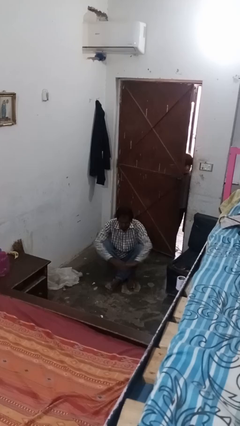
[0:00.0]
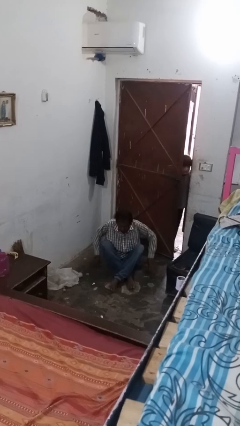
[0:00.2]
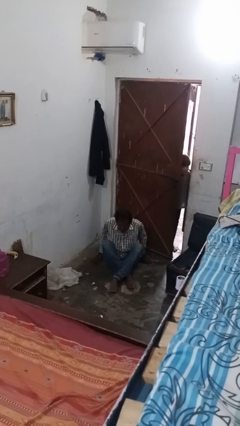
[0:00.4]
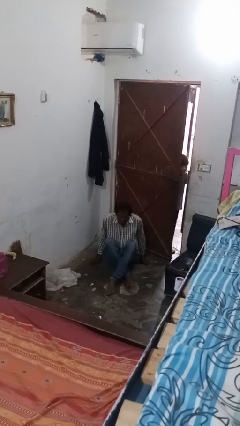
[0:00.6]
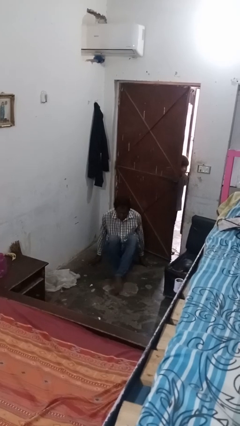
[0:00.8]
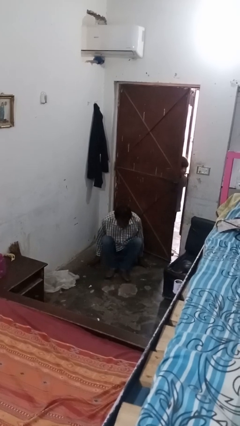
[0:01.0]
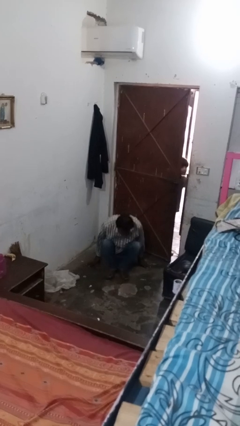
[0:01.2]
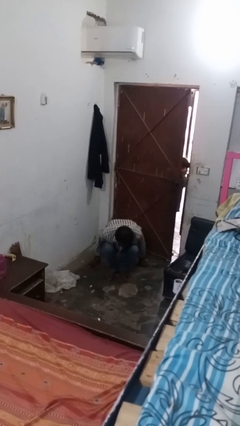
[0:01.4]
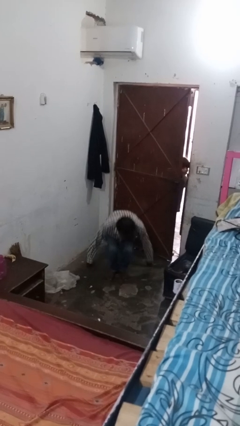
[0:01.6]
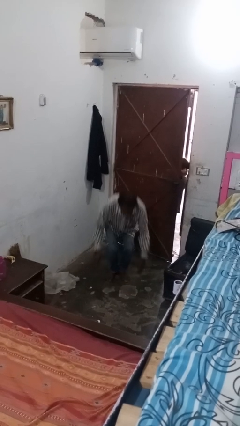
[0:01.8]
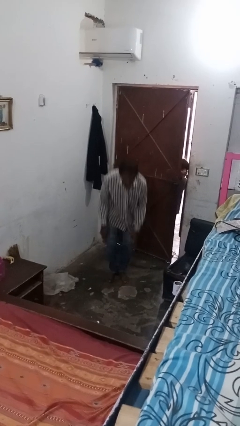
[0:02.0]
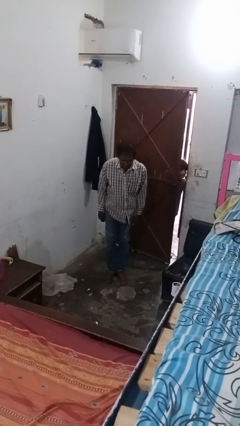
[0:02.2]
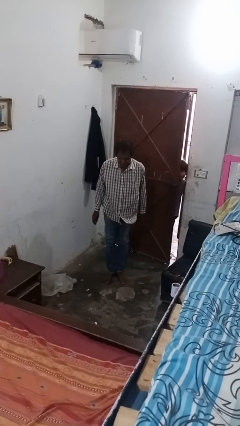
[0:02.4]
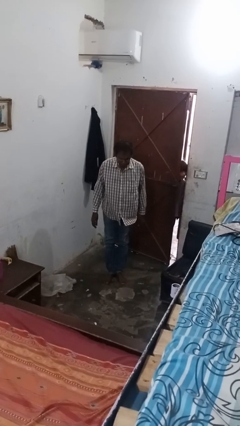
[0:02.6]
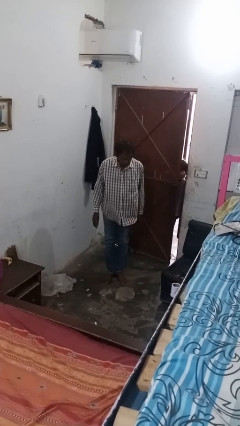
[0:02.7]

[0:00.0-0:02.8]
person stands up from floor

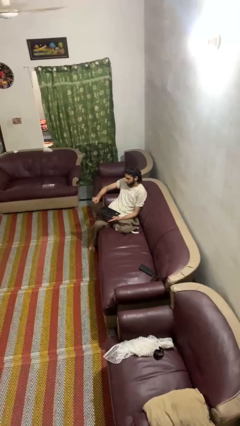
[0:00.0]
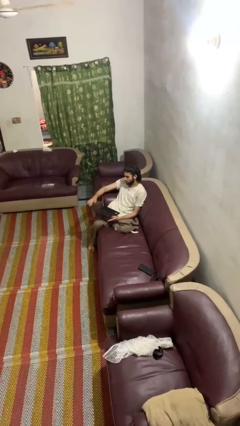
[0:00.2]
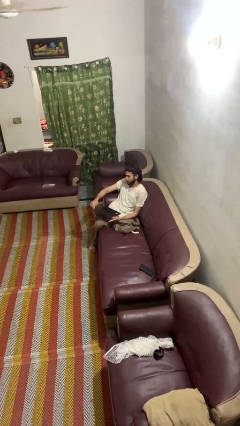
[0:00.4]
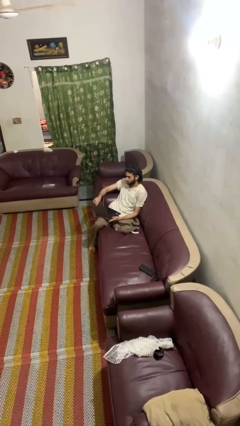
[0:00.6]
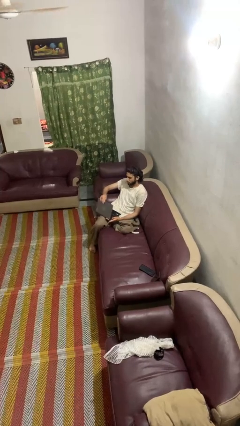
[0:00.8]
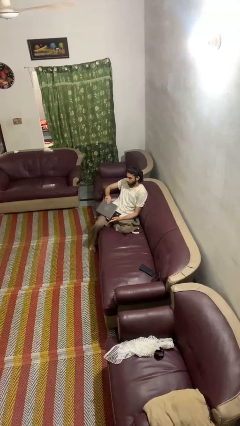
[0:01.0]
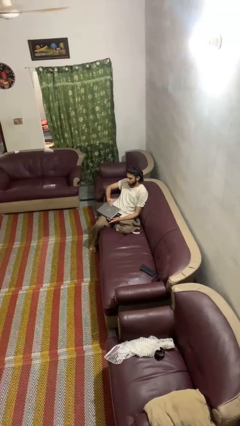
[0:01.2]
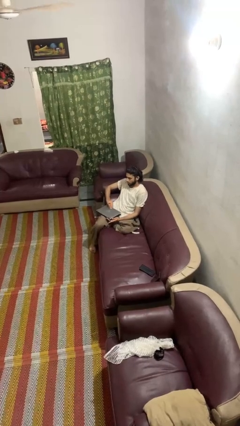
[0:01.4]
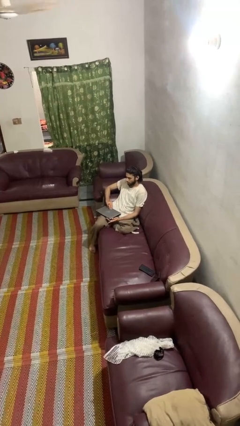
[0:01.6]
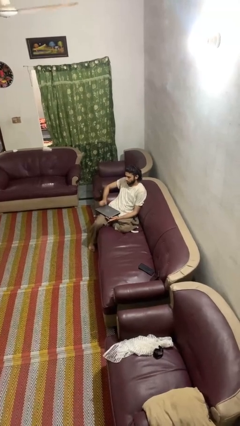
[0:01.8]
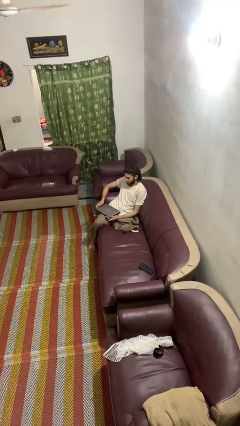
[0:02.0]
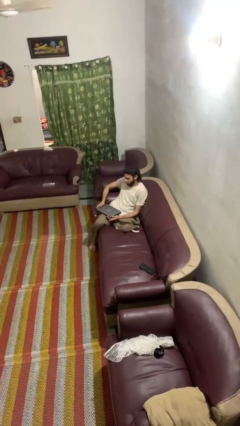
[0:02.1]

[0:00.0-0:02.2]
person closes laptop

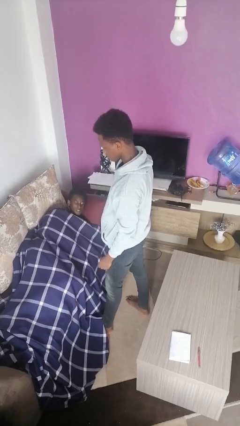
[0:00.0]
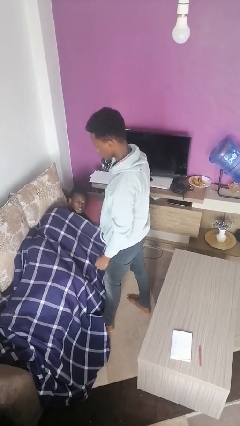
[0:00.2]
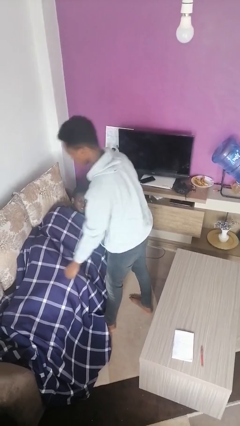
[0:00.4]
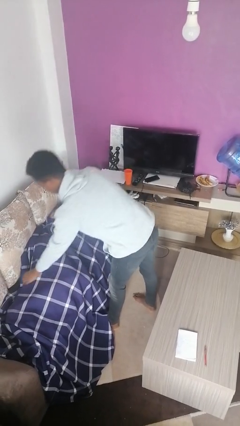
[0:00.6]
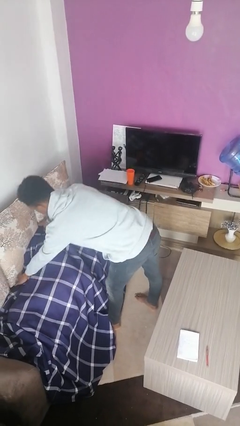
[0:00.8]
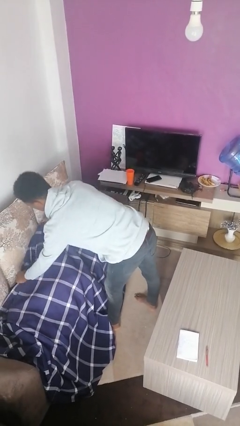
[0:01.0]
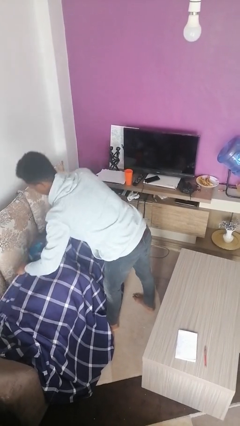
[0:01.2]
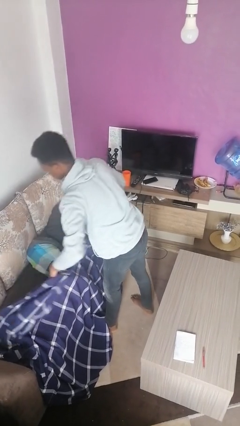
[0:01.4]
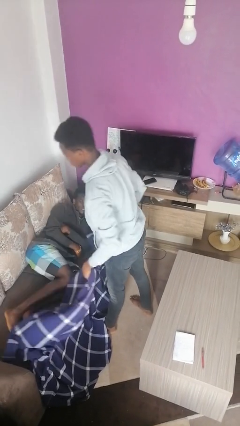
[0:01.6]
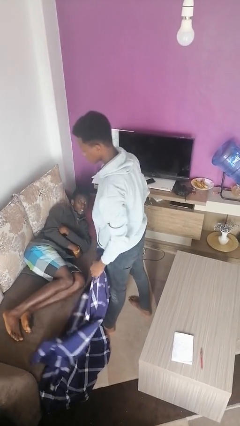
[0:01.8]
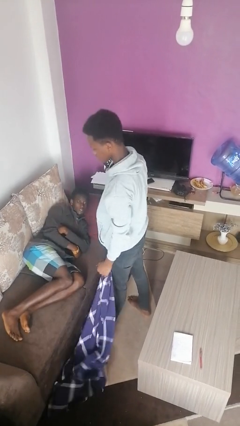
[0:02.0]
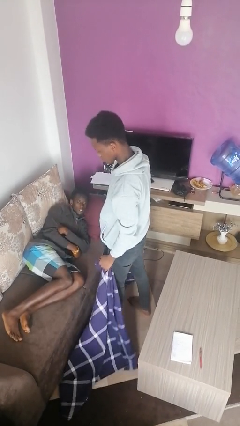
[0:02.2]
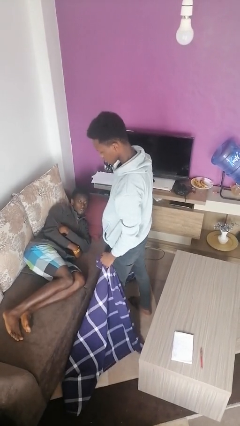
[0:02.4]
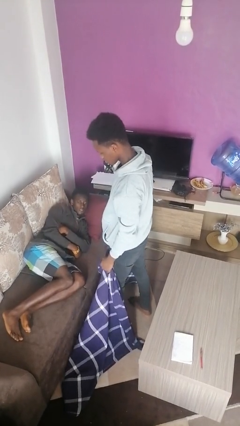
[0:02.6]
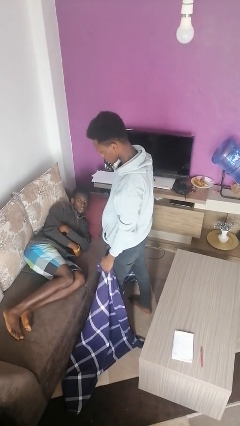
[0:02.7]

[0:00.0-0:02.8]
person uncovers friend with blanket

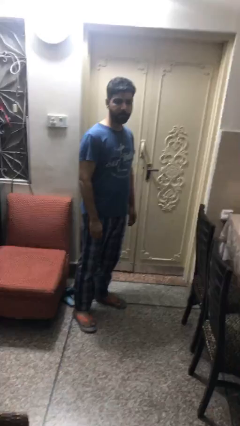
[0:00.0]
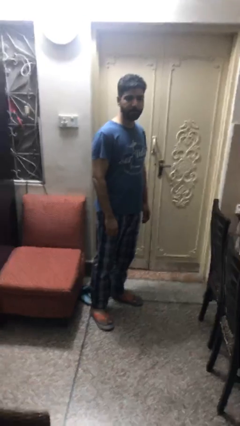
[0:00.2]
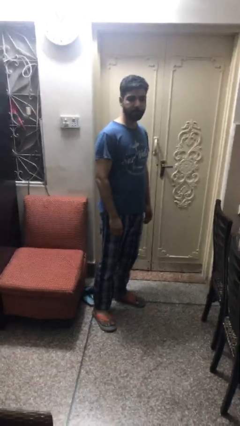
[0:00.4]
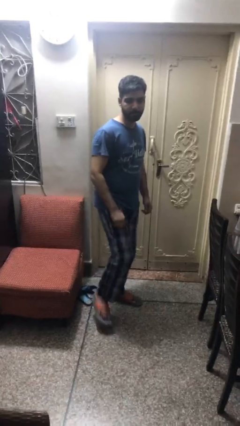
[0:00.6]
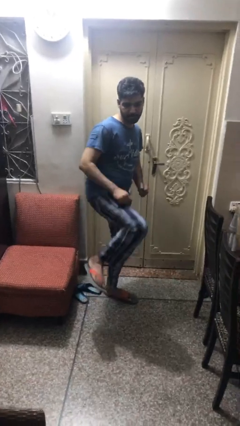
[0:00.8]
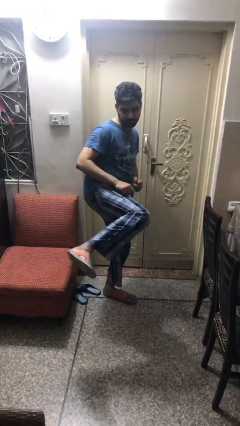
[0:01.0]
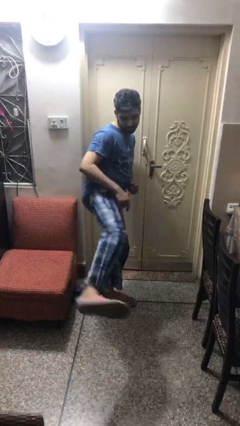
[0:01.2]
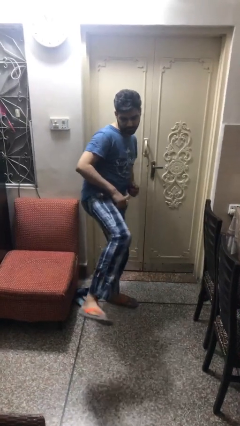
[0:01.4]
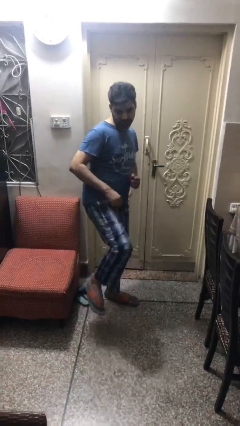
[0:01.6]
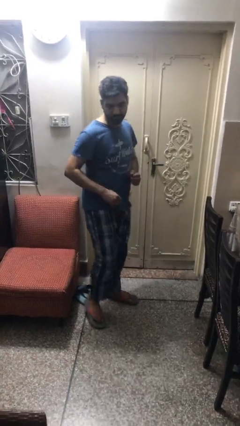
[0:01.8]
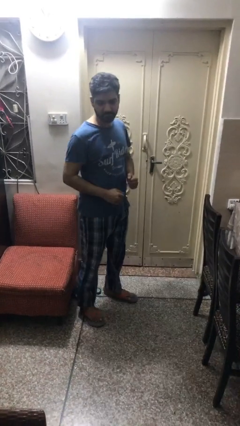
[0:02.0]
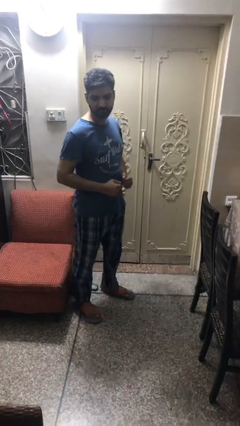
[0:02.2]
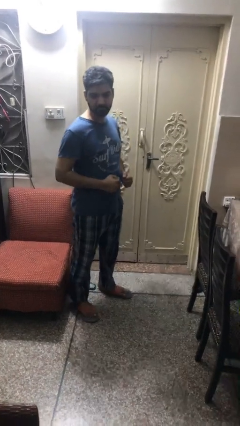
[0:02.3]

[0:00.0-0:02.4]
person karate kicks

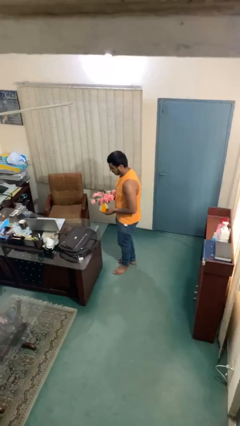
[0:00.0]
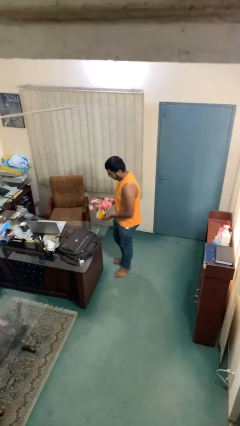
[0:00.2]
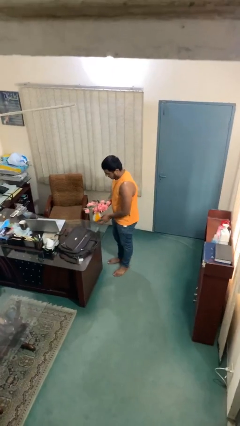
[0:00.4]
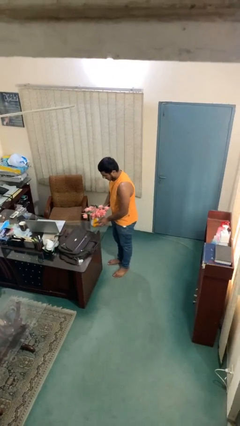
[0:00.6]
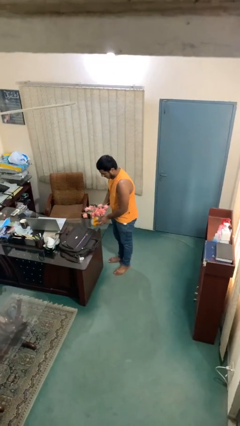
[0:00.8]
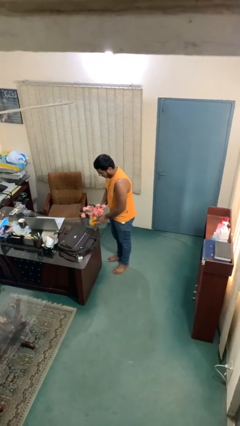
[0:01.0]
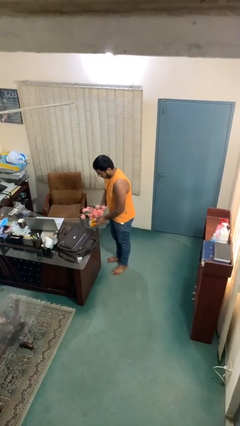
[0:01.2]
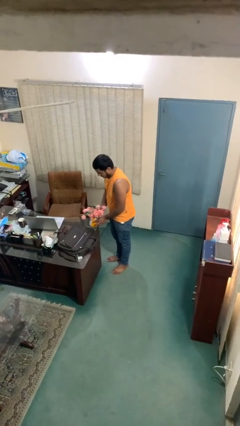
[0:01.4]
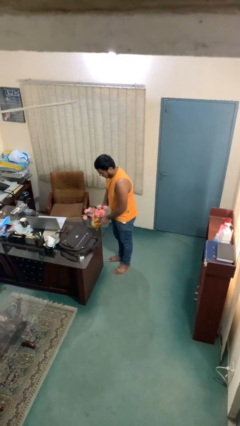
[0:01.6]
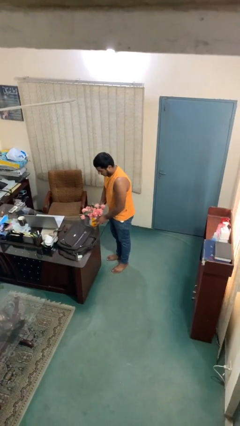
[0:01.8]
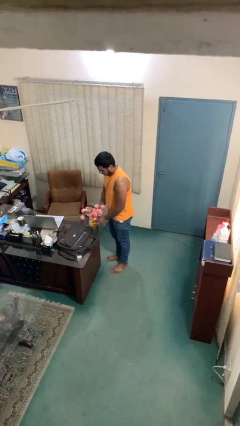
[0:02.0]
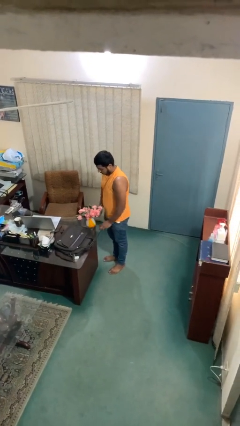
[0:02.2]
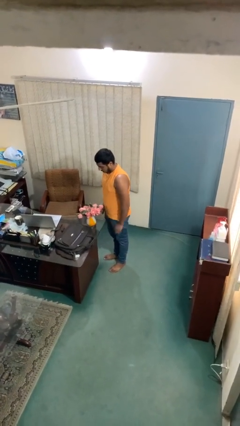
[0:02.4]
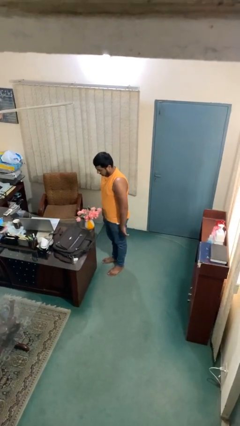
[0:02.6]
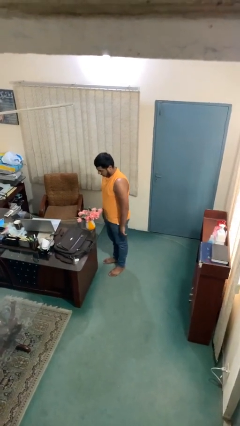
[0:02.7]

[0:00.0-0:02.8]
person puts down object on table

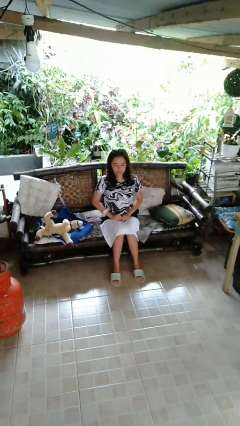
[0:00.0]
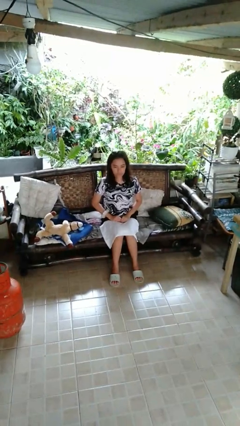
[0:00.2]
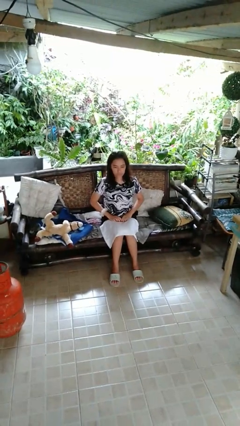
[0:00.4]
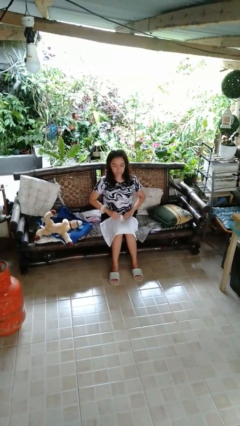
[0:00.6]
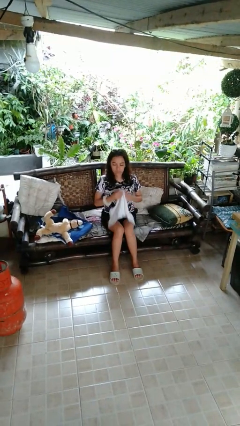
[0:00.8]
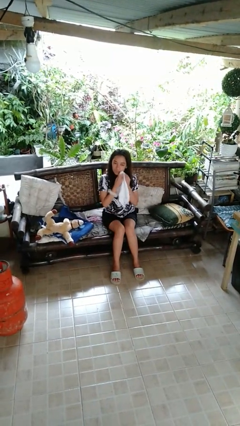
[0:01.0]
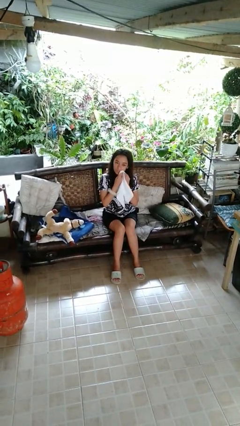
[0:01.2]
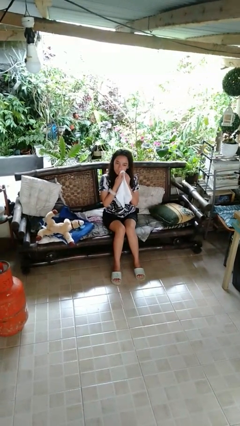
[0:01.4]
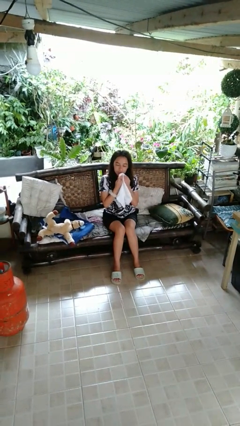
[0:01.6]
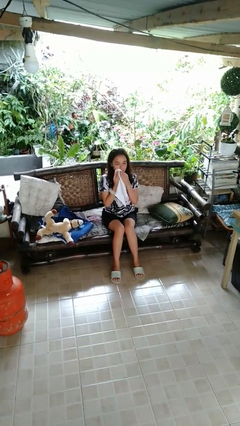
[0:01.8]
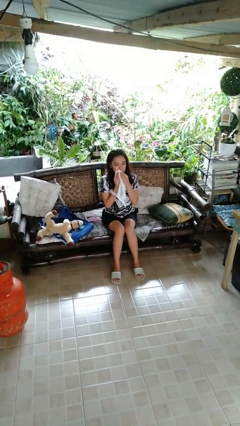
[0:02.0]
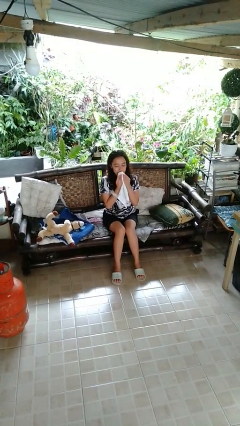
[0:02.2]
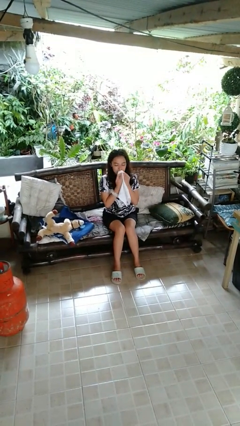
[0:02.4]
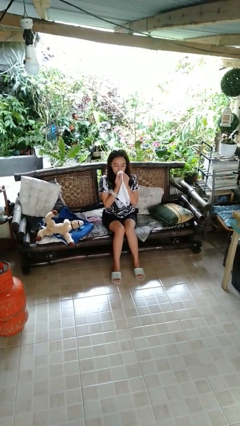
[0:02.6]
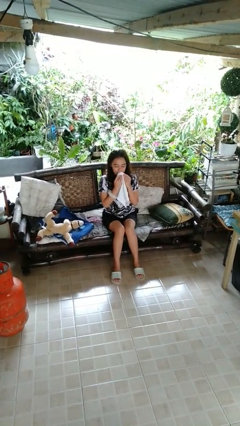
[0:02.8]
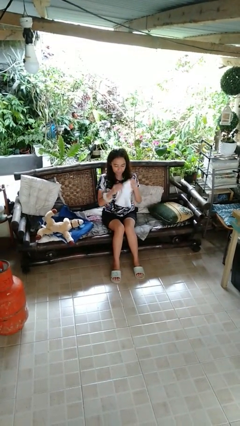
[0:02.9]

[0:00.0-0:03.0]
person wipes mouth with napkin

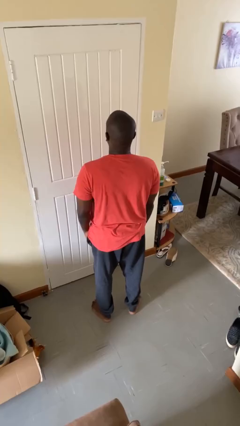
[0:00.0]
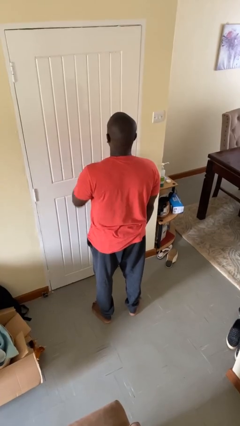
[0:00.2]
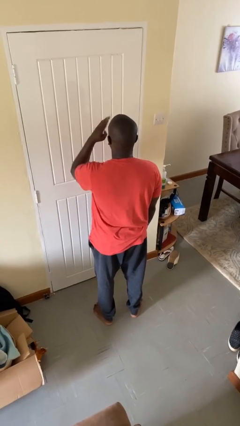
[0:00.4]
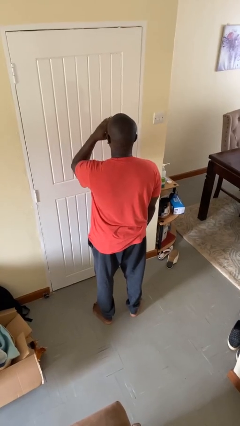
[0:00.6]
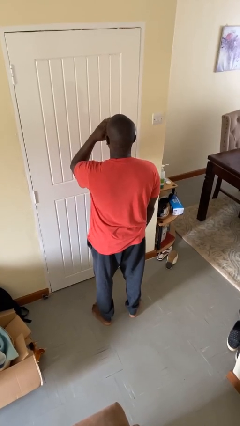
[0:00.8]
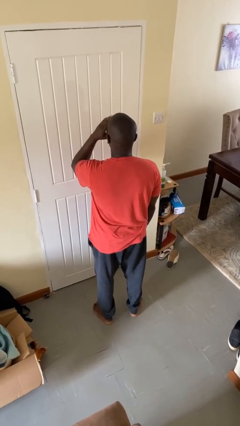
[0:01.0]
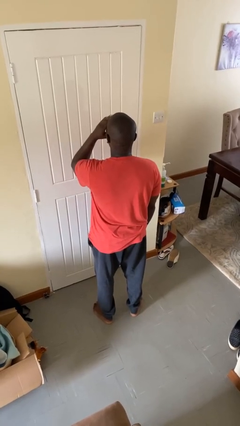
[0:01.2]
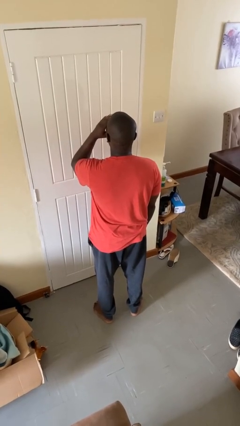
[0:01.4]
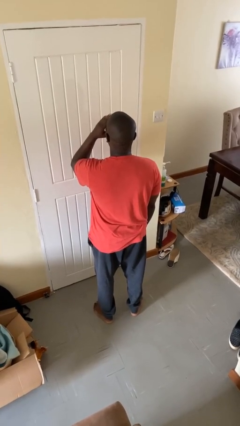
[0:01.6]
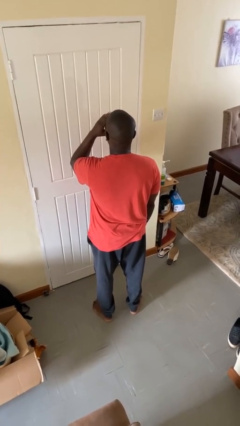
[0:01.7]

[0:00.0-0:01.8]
person salutes
